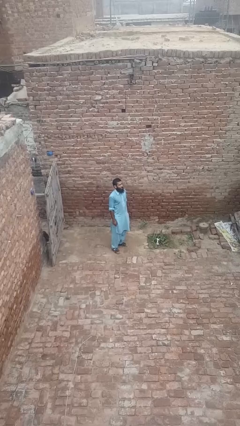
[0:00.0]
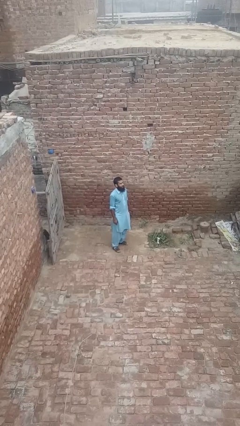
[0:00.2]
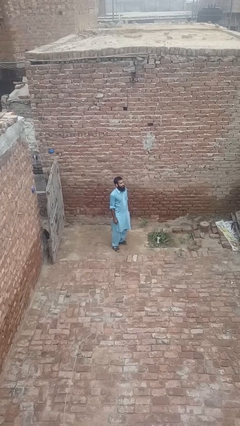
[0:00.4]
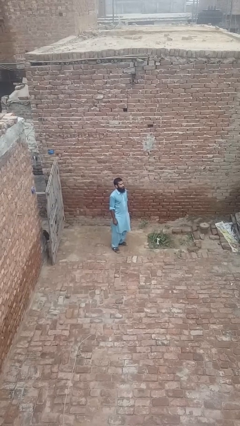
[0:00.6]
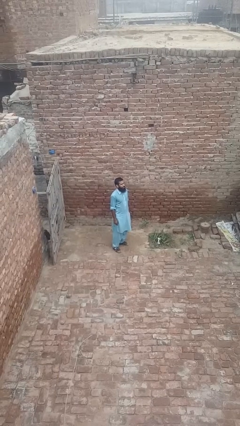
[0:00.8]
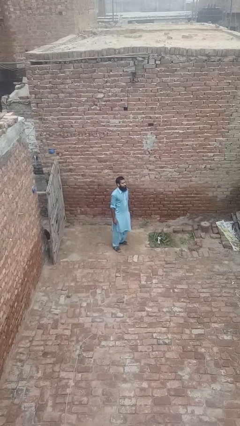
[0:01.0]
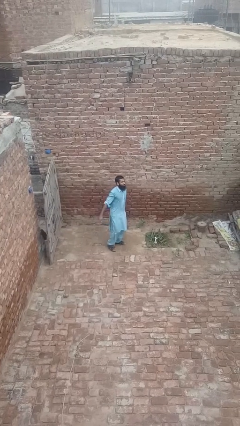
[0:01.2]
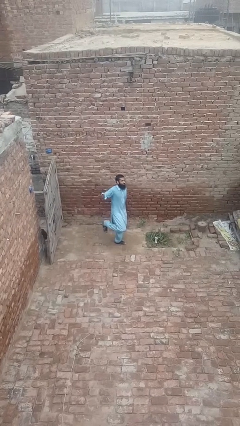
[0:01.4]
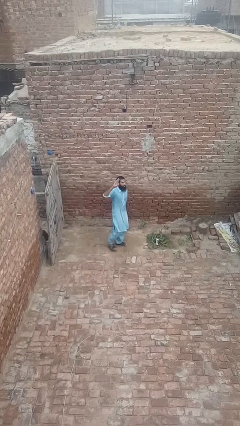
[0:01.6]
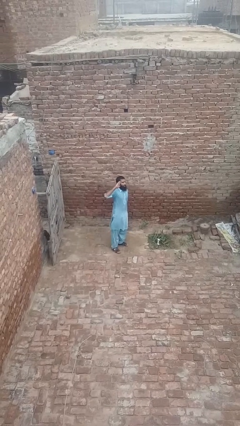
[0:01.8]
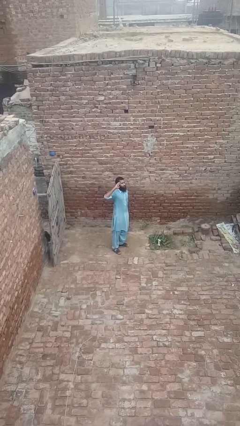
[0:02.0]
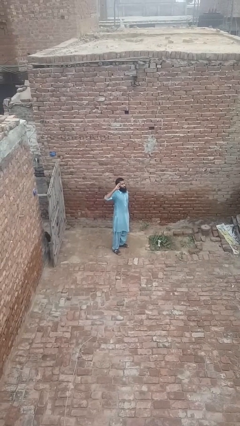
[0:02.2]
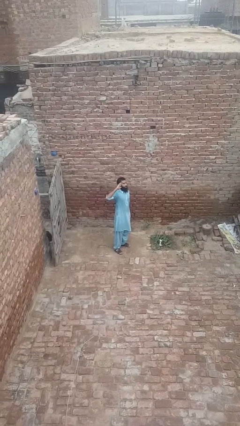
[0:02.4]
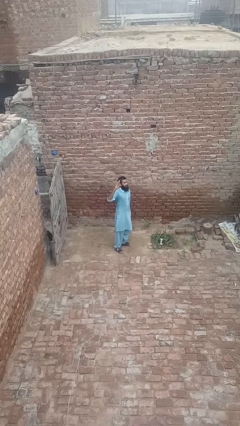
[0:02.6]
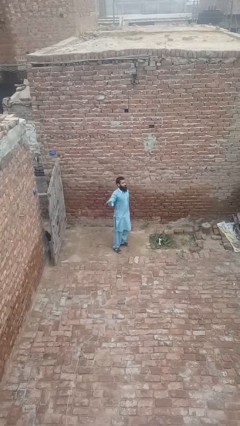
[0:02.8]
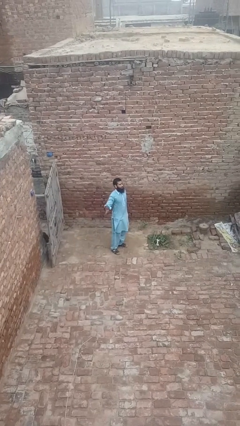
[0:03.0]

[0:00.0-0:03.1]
person salutes

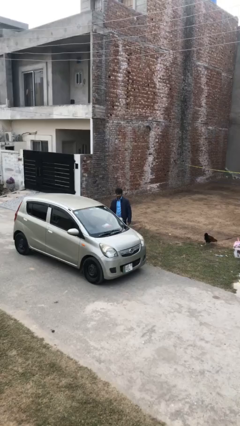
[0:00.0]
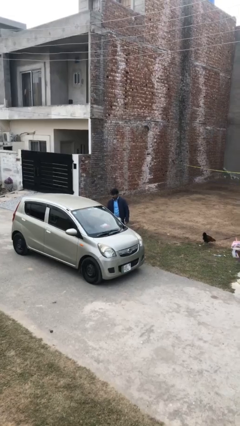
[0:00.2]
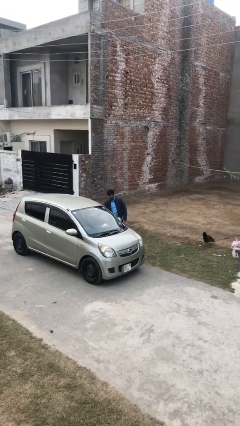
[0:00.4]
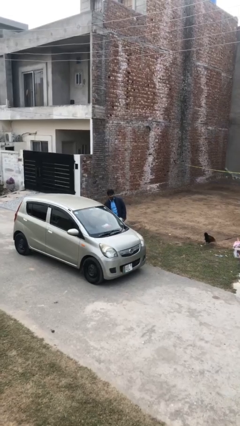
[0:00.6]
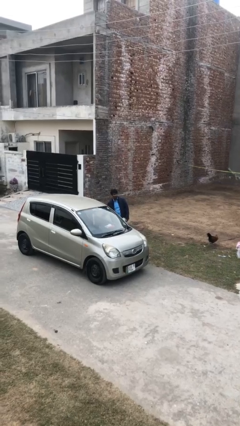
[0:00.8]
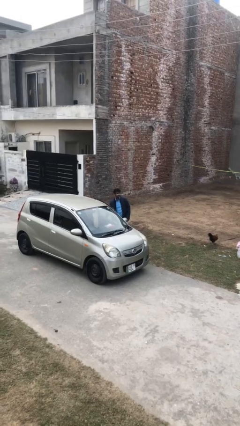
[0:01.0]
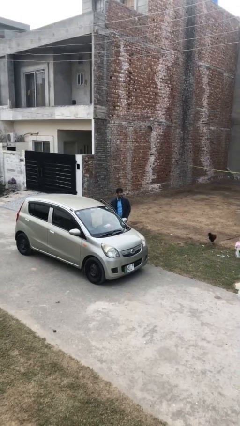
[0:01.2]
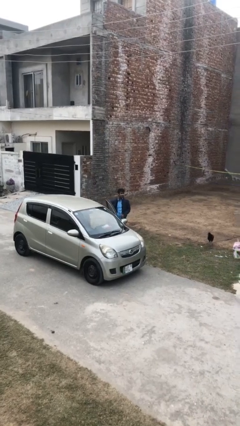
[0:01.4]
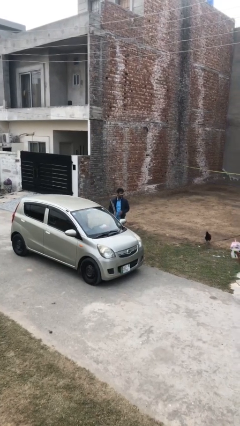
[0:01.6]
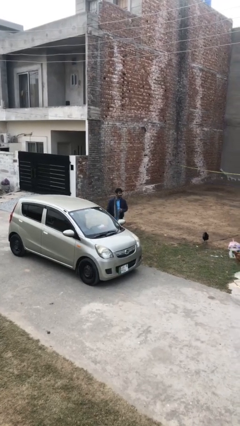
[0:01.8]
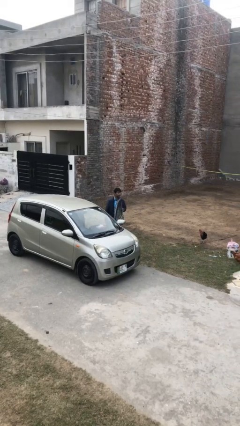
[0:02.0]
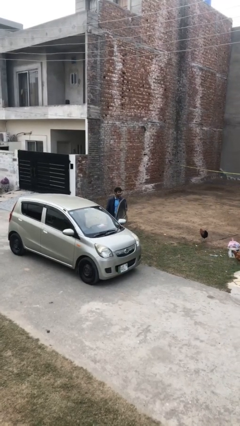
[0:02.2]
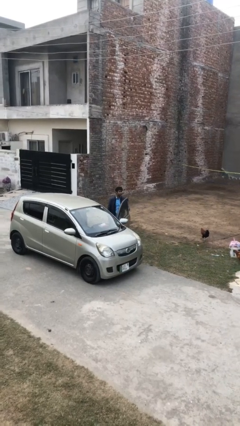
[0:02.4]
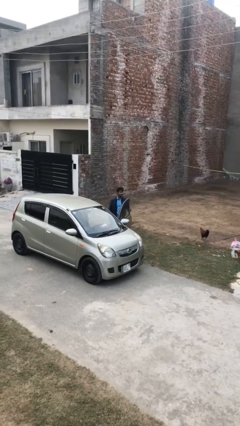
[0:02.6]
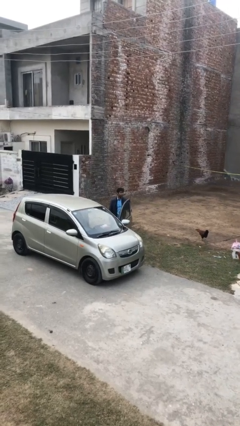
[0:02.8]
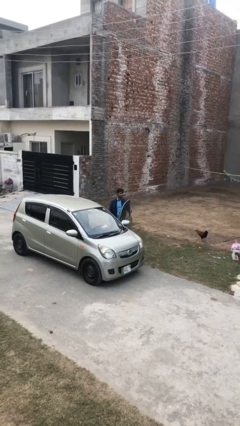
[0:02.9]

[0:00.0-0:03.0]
person opens car door

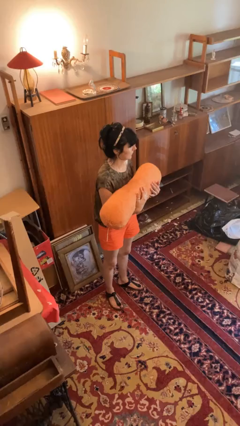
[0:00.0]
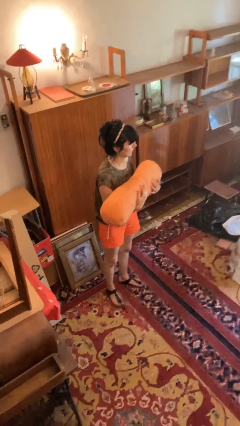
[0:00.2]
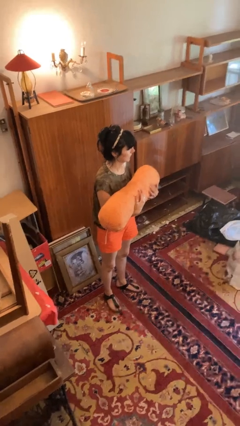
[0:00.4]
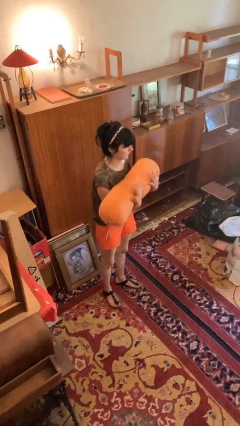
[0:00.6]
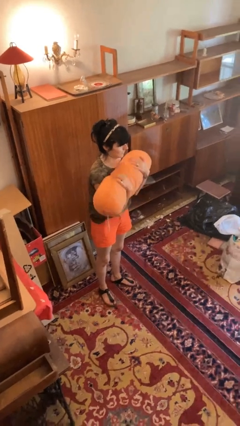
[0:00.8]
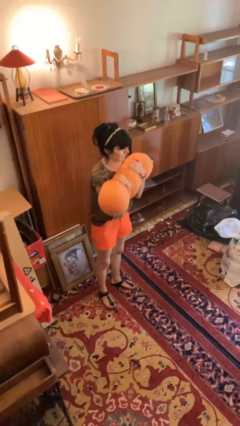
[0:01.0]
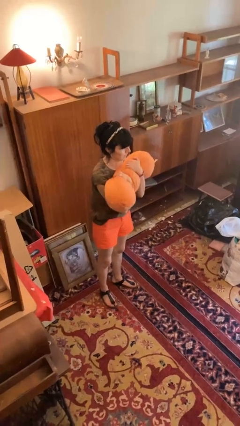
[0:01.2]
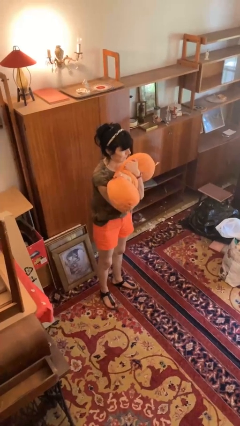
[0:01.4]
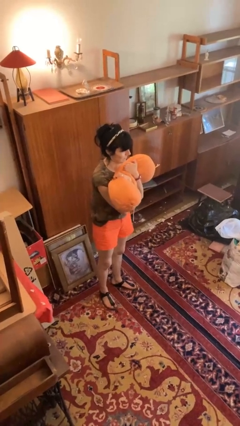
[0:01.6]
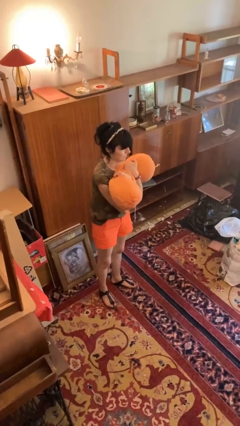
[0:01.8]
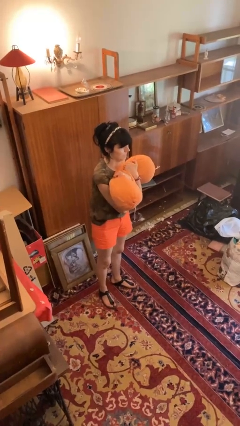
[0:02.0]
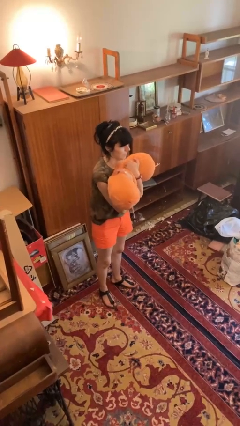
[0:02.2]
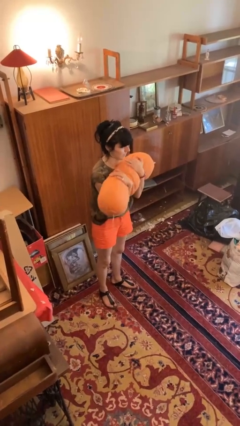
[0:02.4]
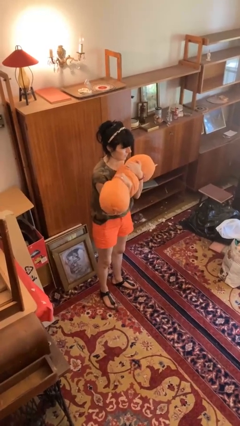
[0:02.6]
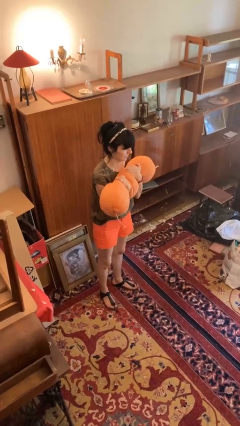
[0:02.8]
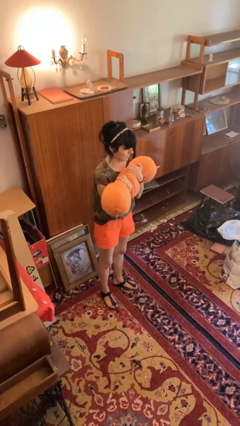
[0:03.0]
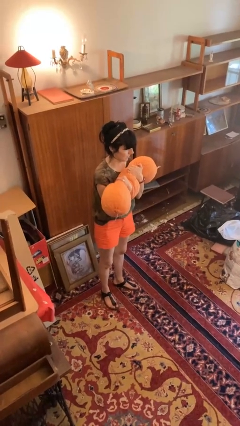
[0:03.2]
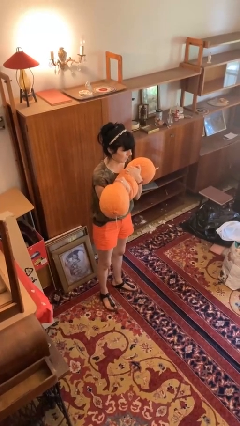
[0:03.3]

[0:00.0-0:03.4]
person squeezes object

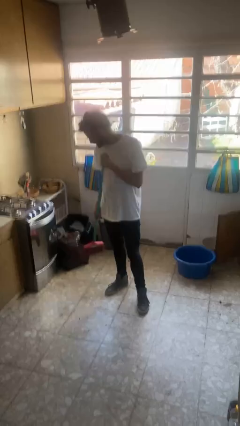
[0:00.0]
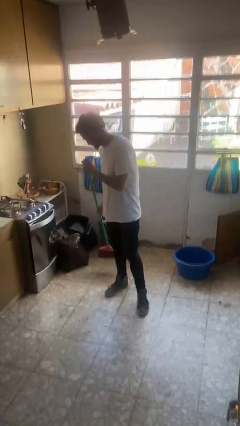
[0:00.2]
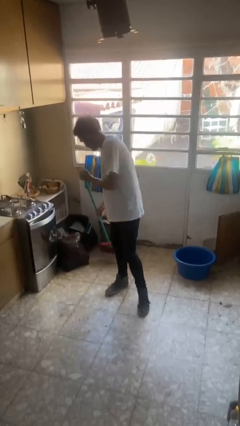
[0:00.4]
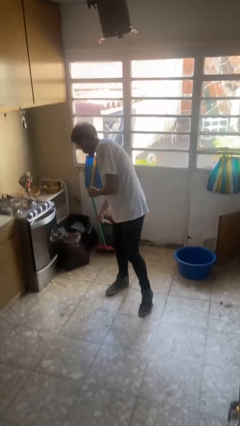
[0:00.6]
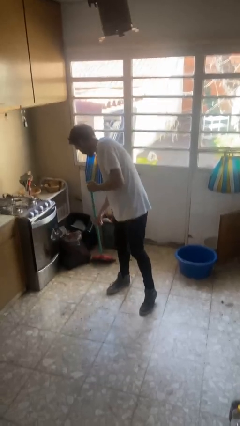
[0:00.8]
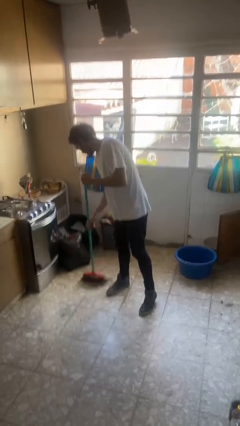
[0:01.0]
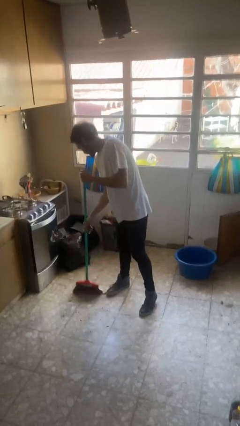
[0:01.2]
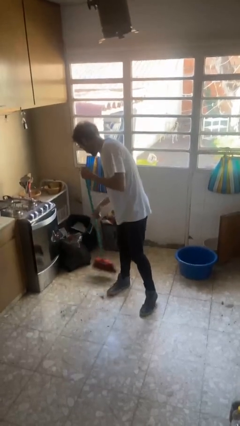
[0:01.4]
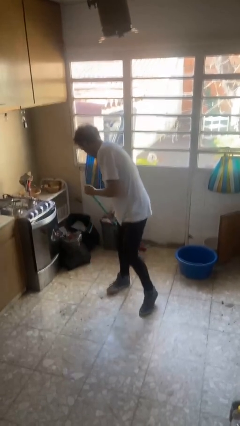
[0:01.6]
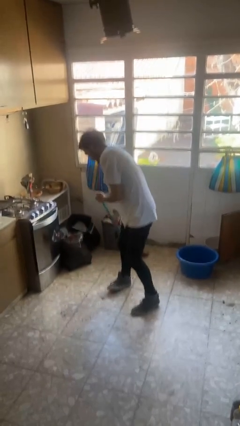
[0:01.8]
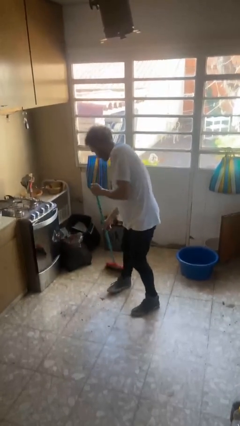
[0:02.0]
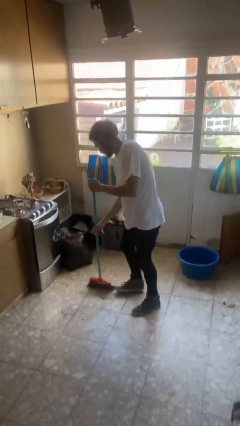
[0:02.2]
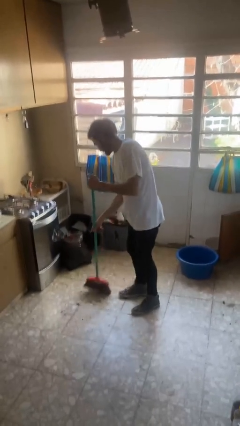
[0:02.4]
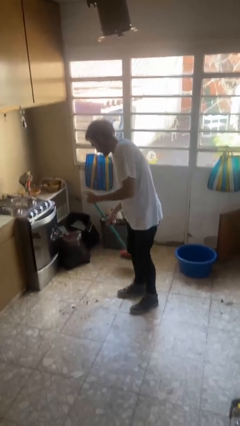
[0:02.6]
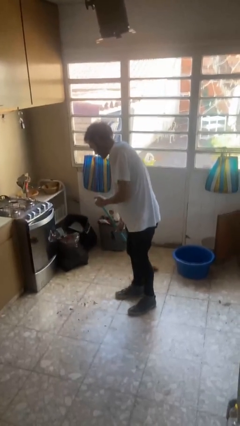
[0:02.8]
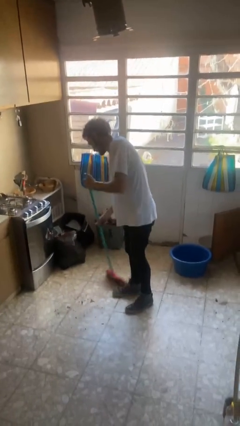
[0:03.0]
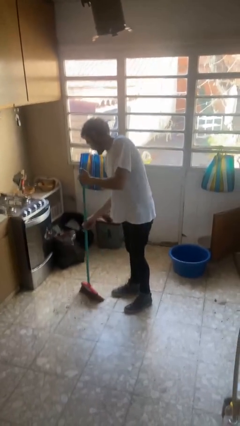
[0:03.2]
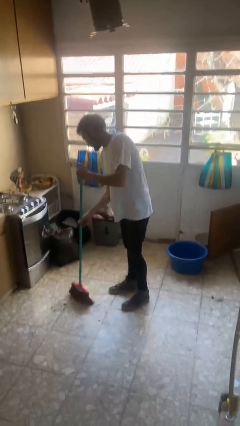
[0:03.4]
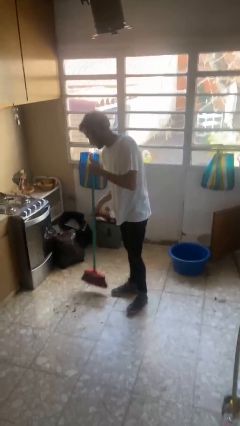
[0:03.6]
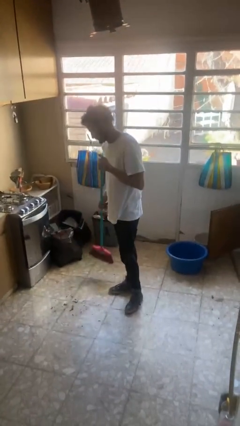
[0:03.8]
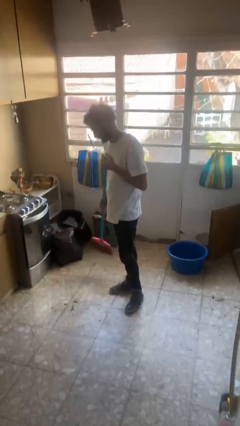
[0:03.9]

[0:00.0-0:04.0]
person sweeps floor

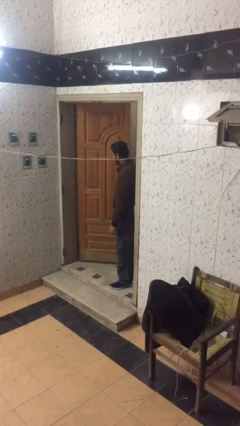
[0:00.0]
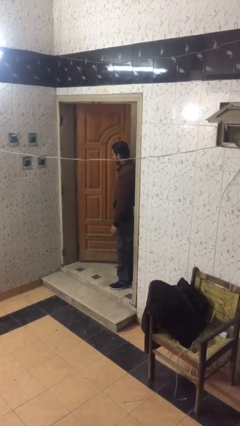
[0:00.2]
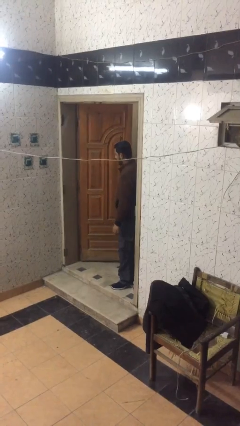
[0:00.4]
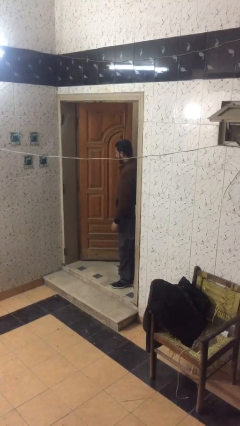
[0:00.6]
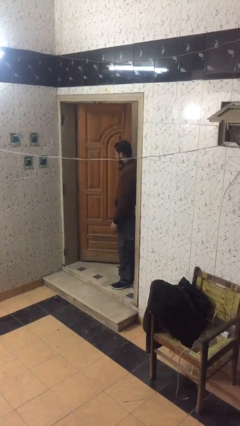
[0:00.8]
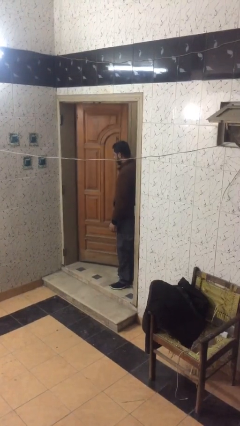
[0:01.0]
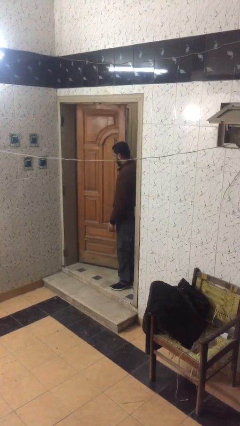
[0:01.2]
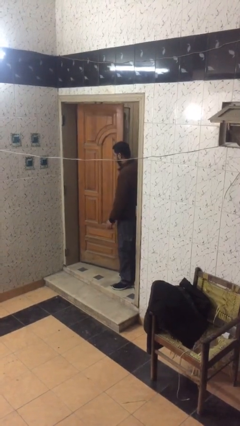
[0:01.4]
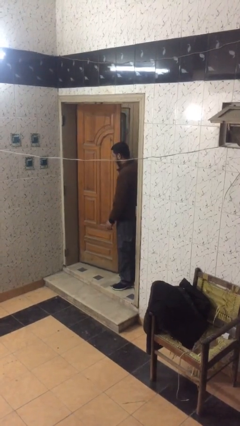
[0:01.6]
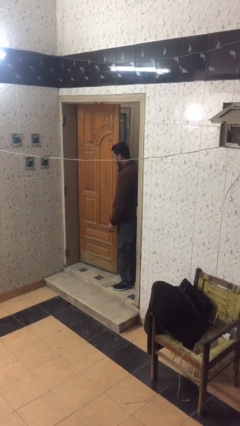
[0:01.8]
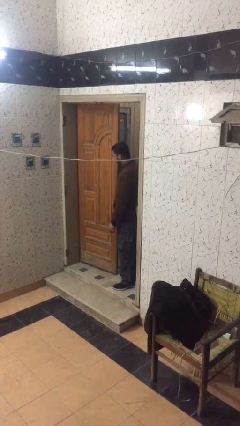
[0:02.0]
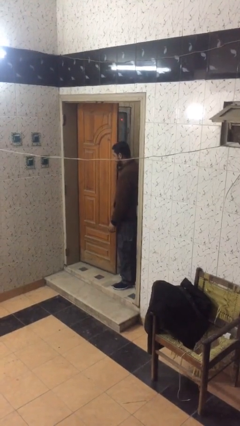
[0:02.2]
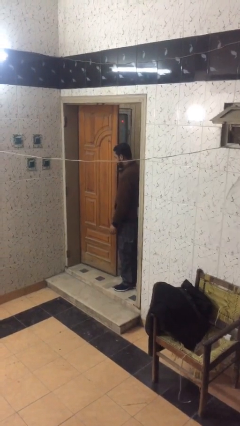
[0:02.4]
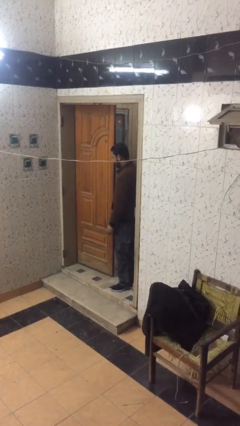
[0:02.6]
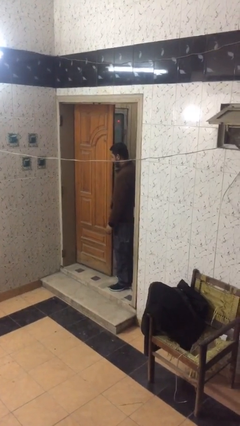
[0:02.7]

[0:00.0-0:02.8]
person closes facility door

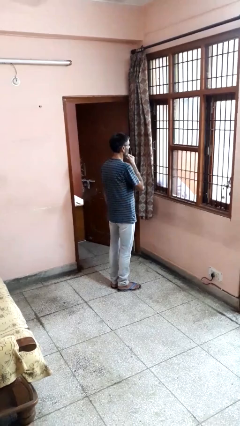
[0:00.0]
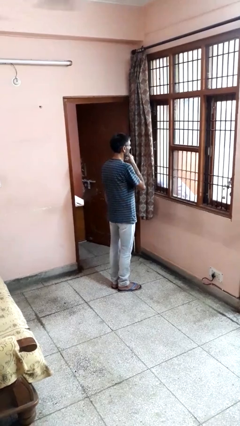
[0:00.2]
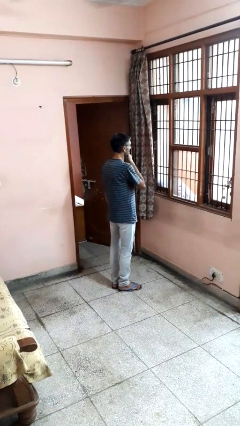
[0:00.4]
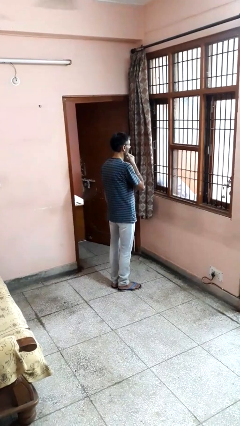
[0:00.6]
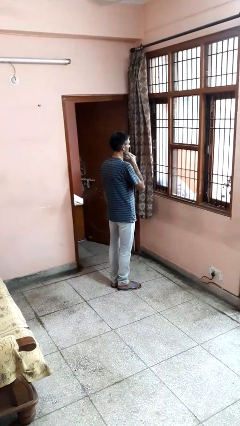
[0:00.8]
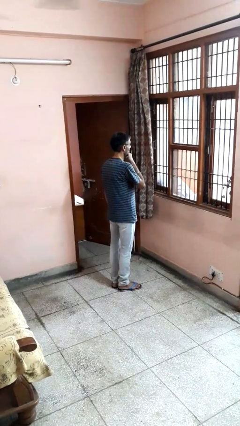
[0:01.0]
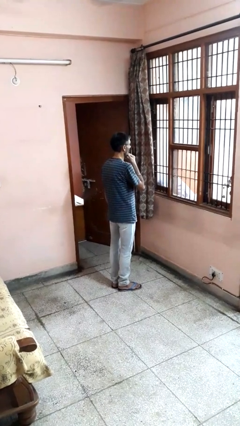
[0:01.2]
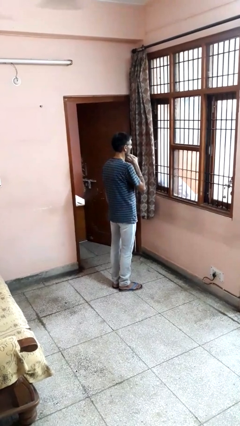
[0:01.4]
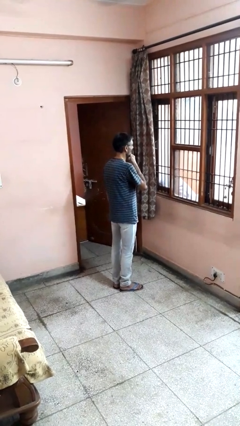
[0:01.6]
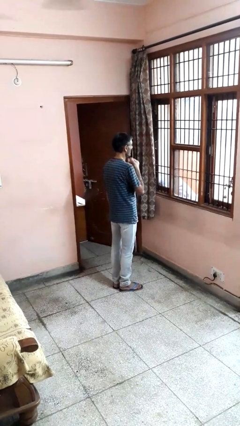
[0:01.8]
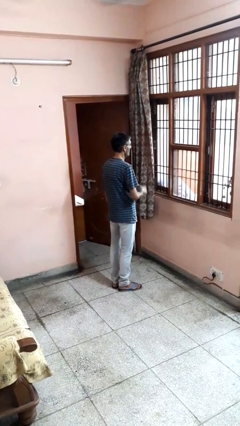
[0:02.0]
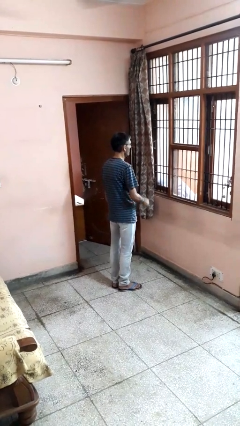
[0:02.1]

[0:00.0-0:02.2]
person strokes chin
